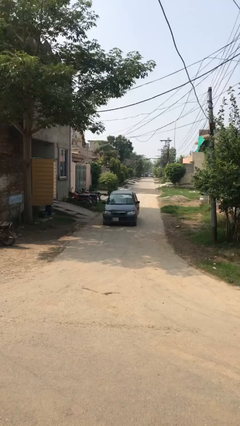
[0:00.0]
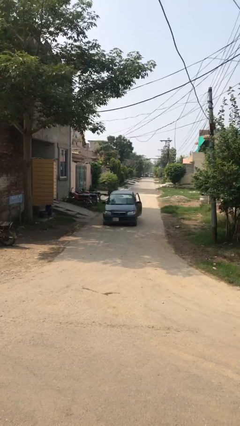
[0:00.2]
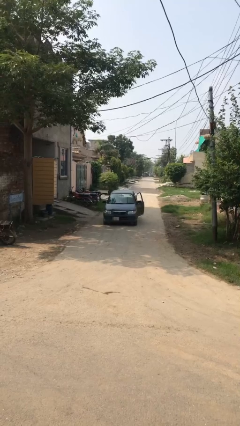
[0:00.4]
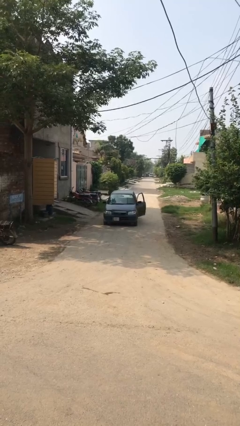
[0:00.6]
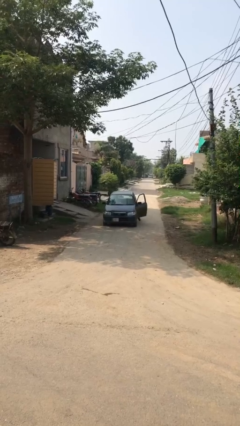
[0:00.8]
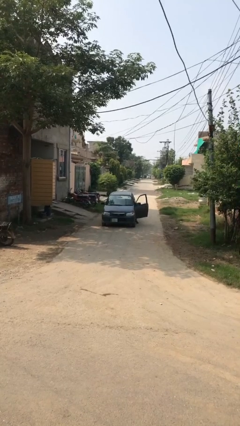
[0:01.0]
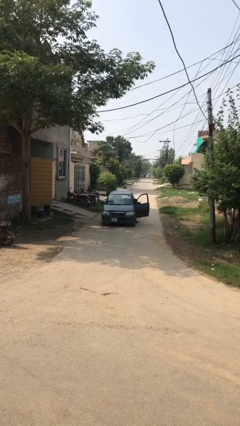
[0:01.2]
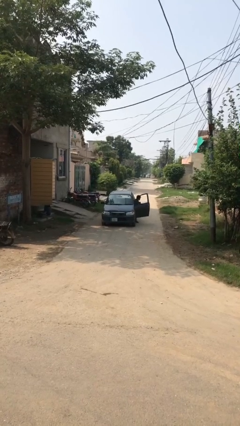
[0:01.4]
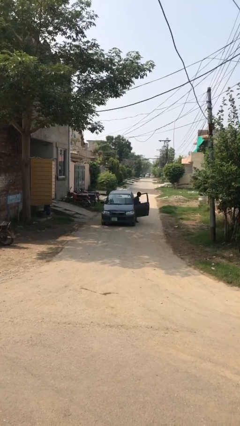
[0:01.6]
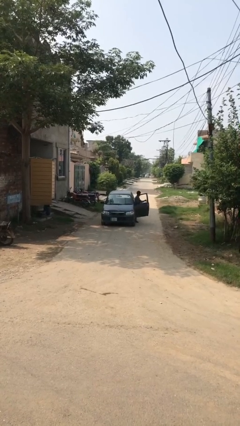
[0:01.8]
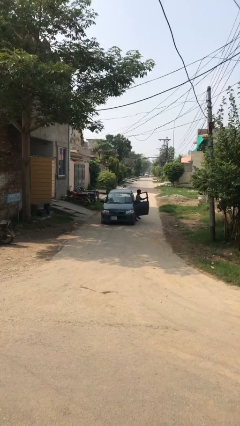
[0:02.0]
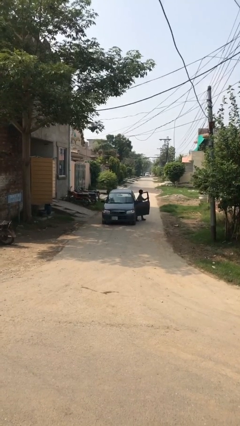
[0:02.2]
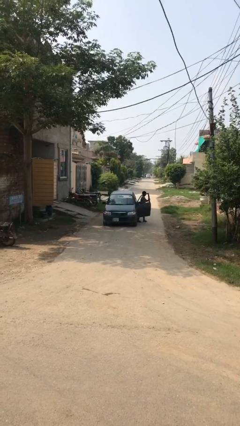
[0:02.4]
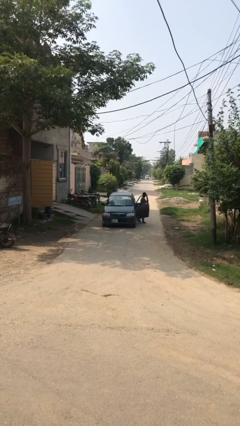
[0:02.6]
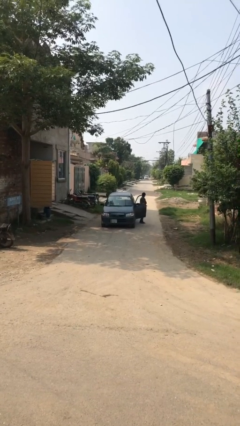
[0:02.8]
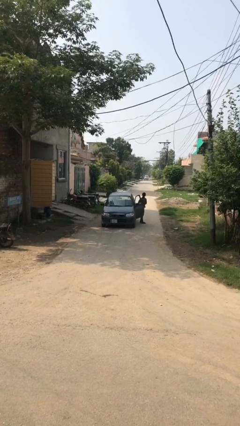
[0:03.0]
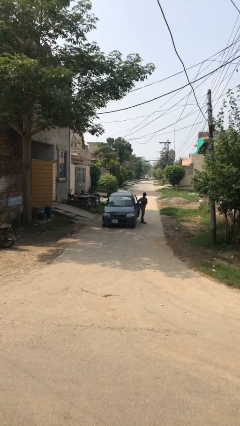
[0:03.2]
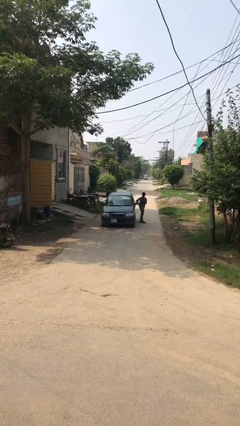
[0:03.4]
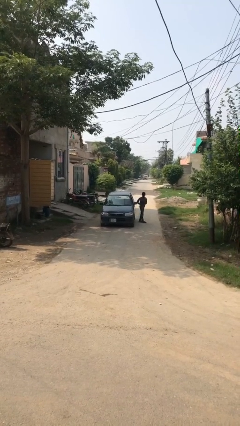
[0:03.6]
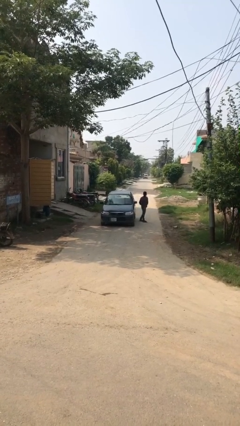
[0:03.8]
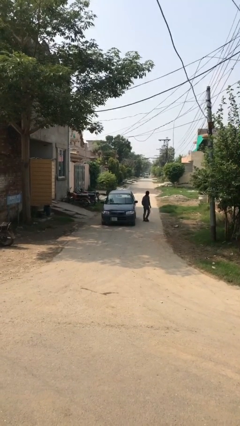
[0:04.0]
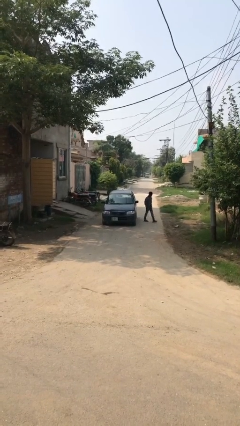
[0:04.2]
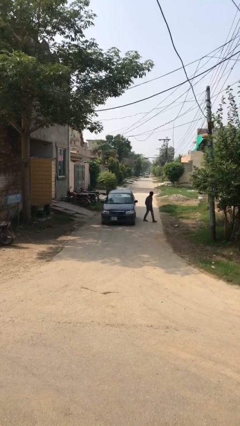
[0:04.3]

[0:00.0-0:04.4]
car drops off person

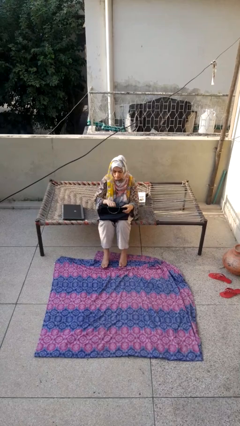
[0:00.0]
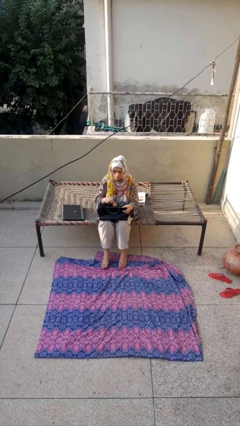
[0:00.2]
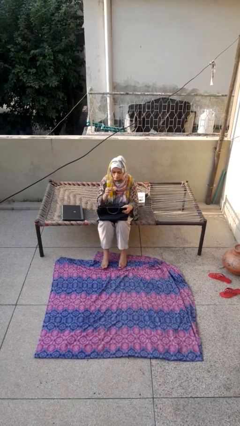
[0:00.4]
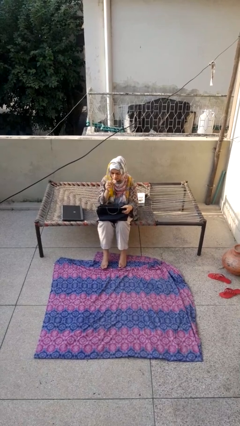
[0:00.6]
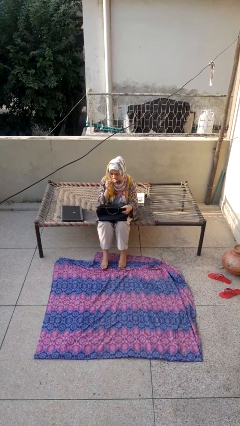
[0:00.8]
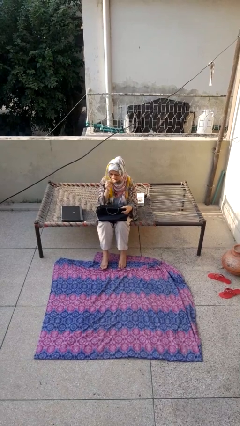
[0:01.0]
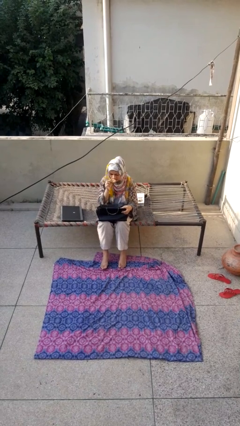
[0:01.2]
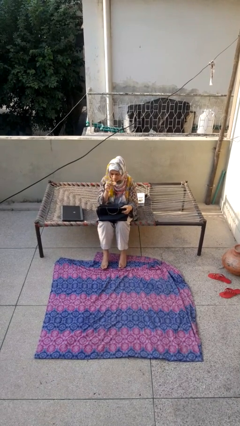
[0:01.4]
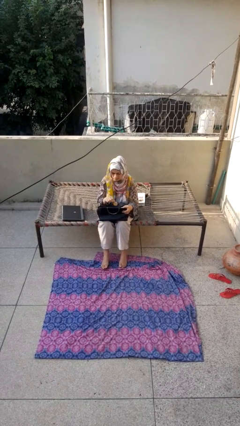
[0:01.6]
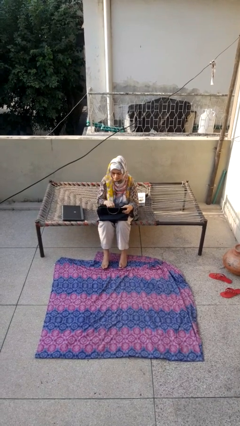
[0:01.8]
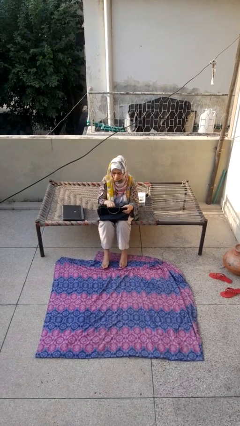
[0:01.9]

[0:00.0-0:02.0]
person eats snack from bag

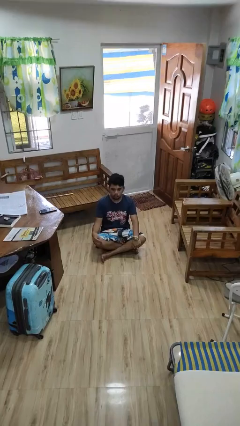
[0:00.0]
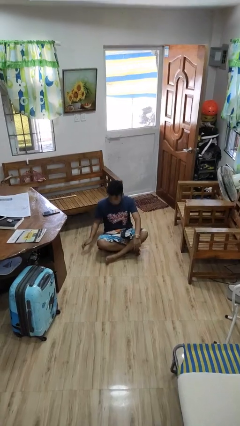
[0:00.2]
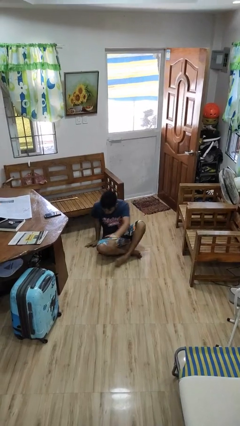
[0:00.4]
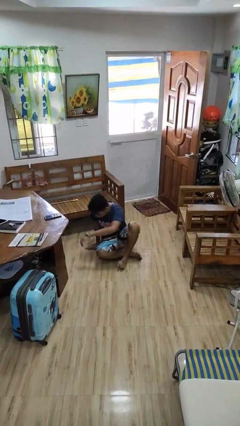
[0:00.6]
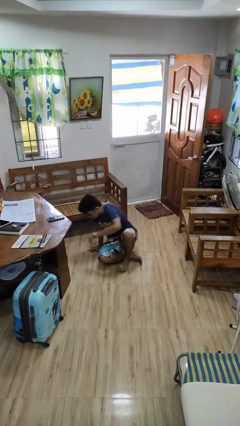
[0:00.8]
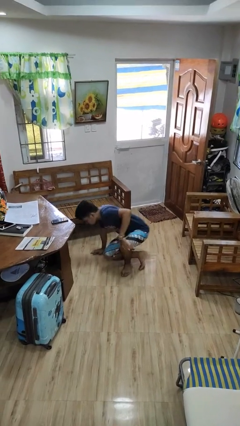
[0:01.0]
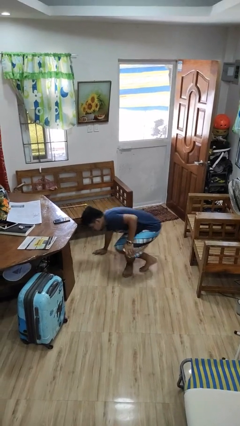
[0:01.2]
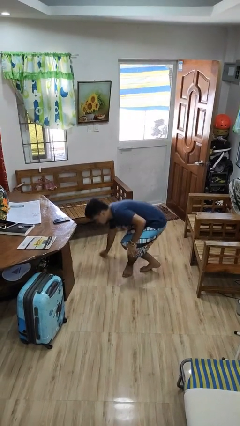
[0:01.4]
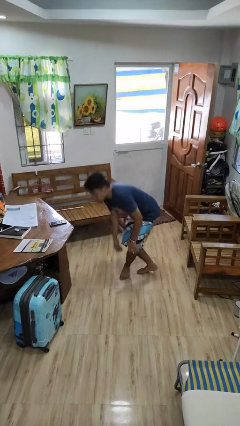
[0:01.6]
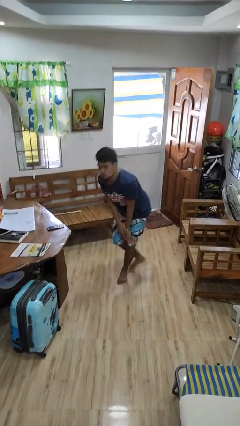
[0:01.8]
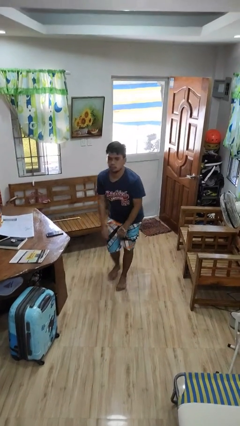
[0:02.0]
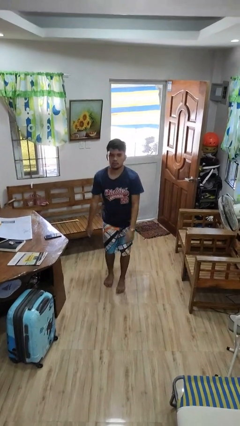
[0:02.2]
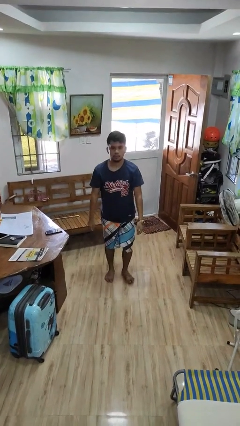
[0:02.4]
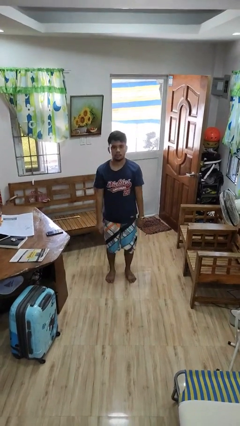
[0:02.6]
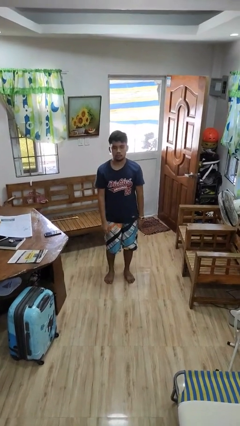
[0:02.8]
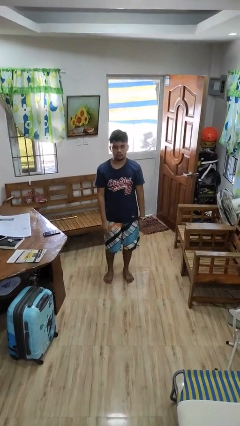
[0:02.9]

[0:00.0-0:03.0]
person stands up from floor

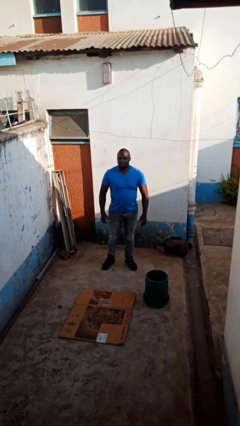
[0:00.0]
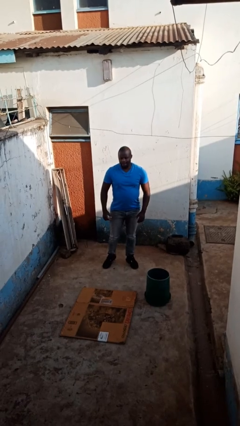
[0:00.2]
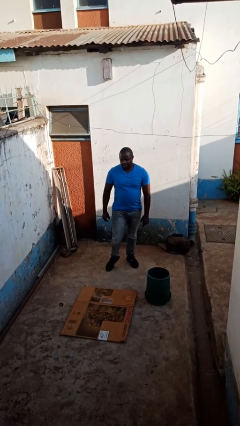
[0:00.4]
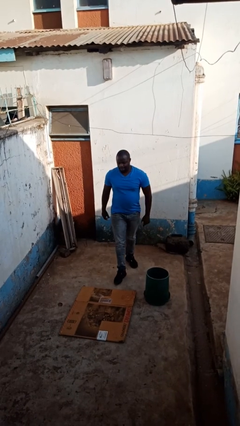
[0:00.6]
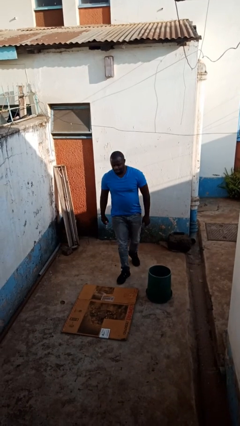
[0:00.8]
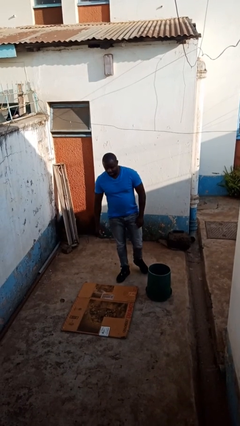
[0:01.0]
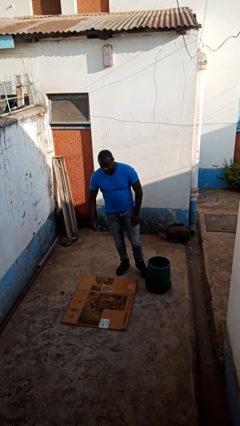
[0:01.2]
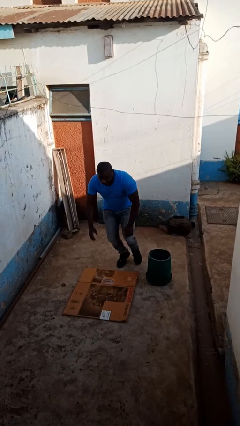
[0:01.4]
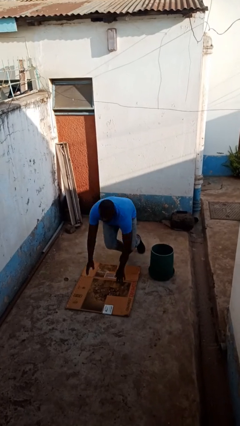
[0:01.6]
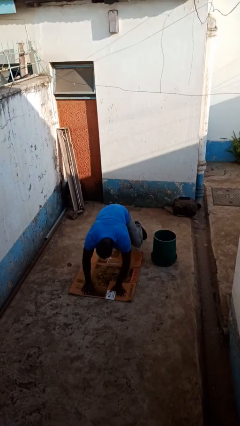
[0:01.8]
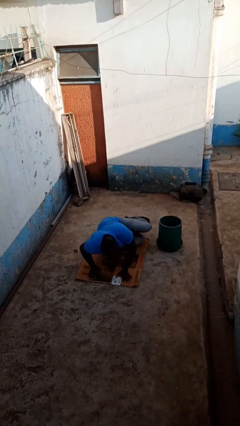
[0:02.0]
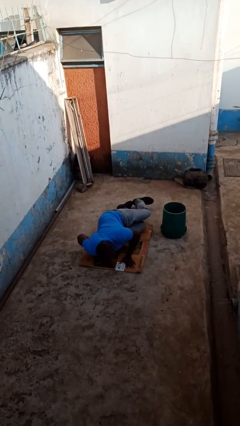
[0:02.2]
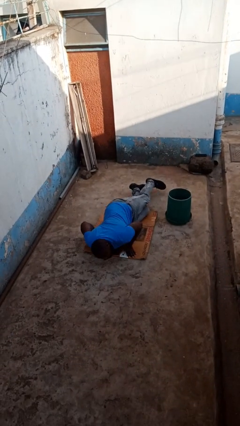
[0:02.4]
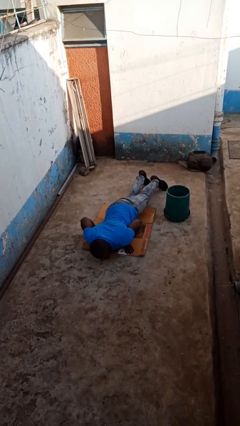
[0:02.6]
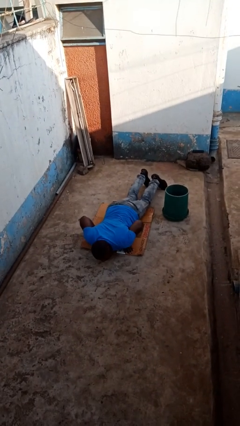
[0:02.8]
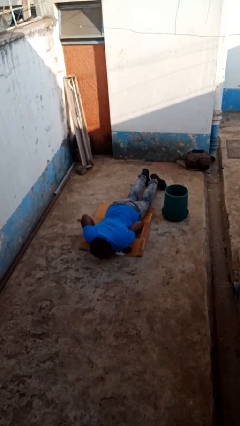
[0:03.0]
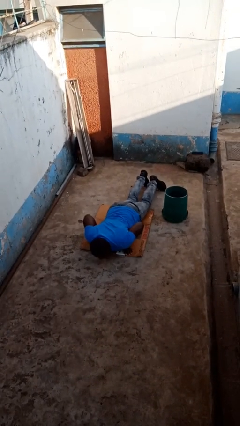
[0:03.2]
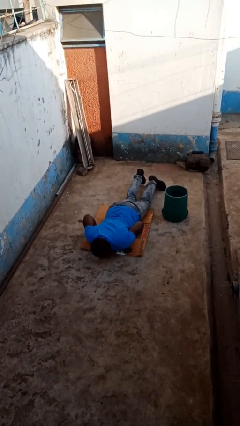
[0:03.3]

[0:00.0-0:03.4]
person trips on object on floor

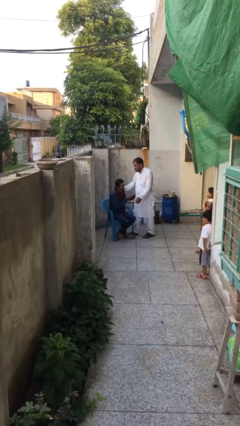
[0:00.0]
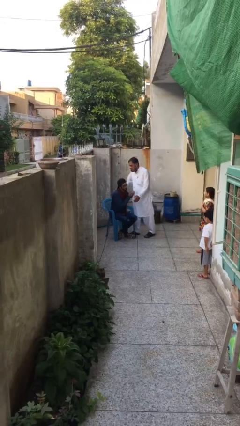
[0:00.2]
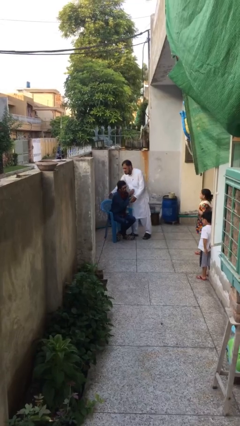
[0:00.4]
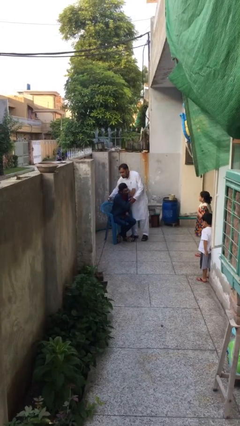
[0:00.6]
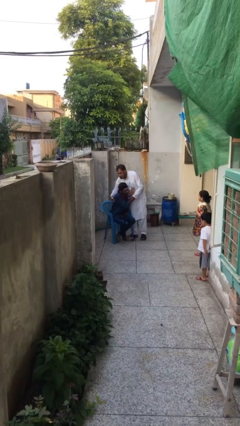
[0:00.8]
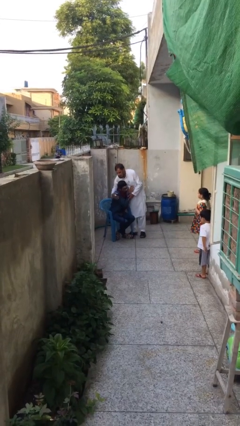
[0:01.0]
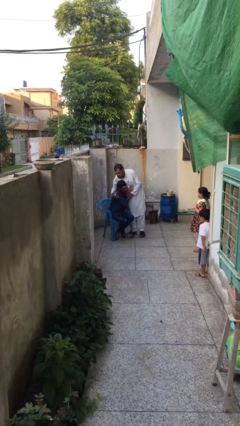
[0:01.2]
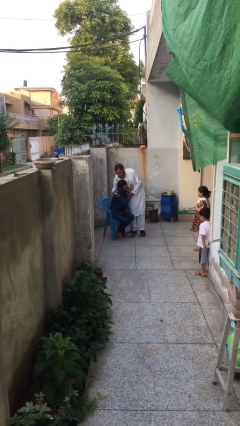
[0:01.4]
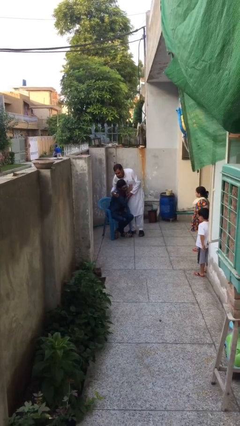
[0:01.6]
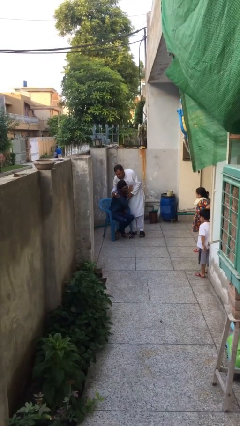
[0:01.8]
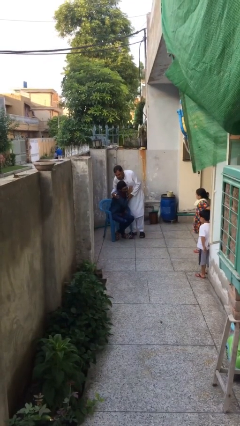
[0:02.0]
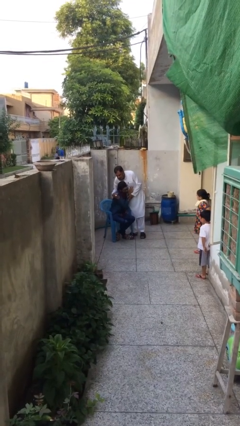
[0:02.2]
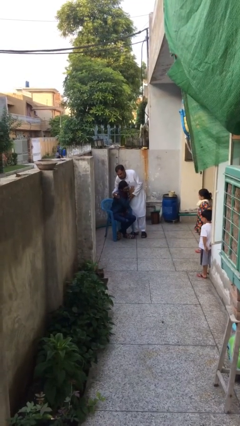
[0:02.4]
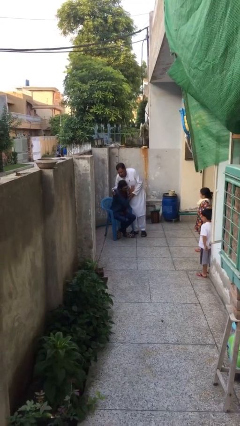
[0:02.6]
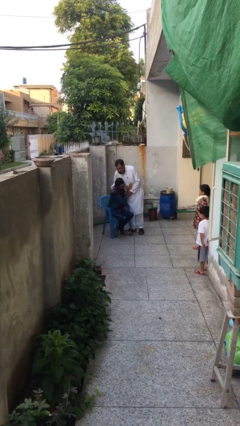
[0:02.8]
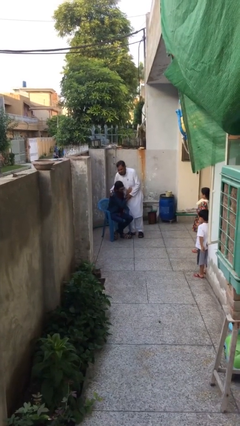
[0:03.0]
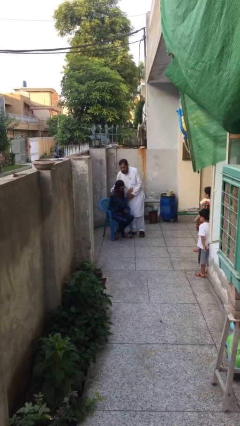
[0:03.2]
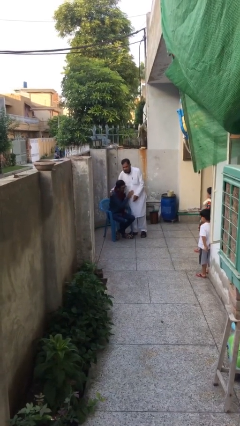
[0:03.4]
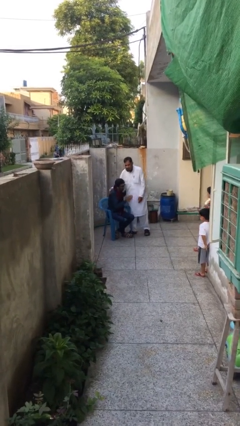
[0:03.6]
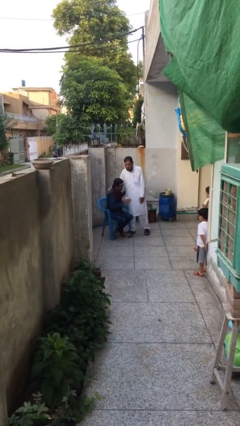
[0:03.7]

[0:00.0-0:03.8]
person embraces person

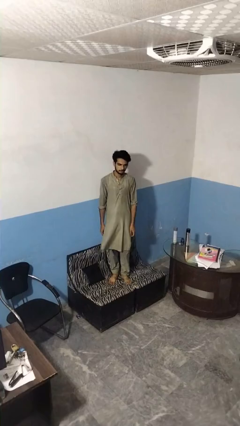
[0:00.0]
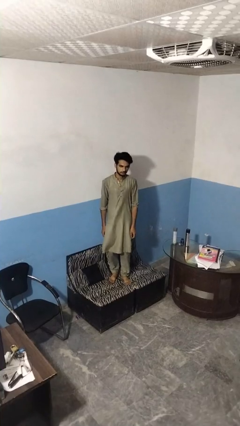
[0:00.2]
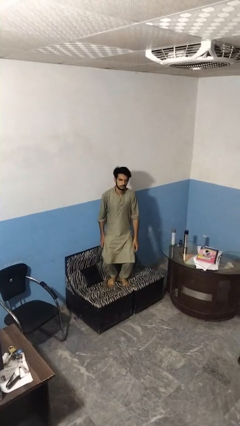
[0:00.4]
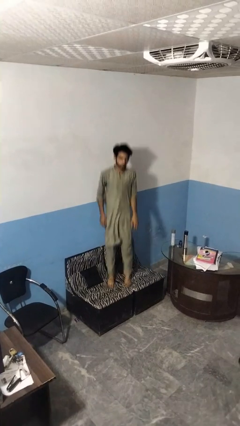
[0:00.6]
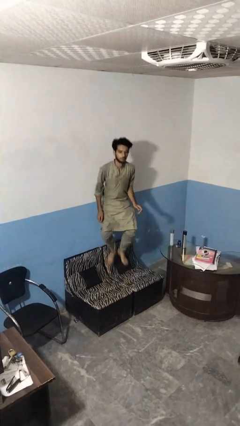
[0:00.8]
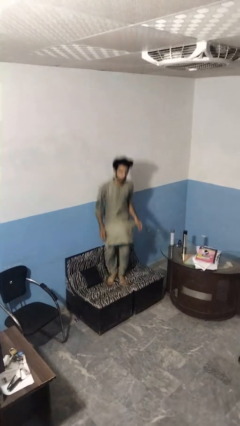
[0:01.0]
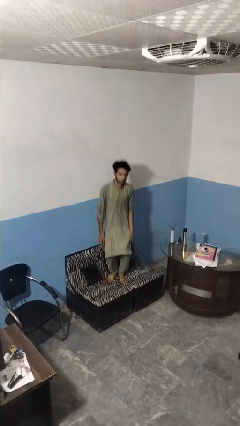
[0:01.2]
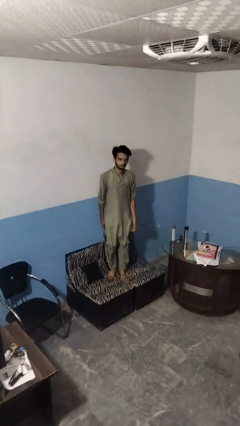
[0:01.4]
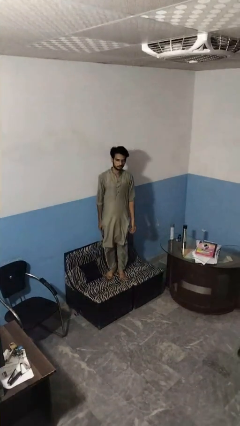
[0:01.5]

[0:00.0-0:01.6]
person jumps on couch
